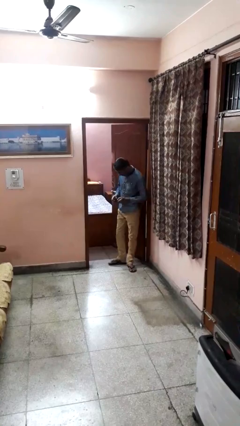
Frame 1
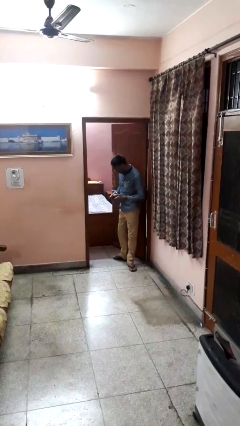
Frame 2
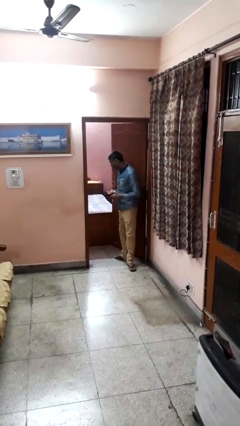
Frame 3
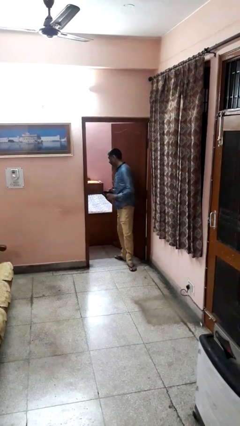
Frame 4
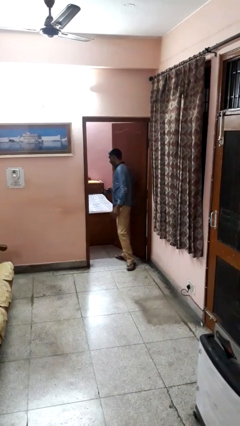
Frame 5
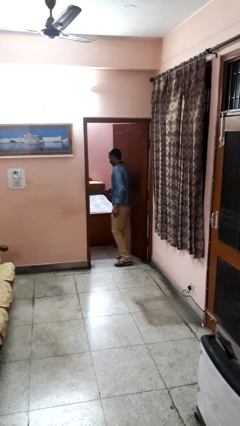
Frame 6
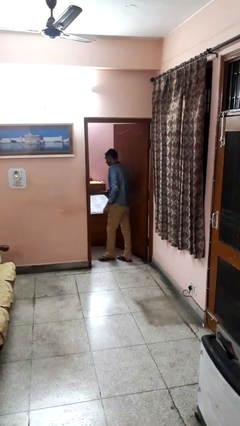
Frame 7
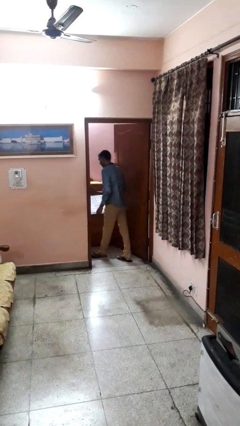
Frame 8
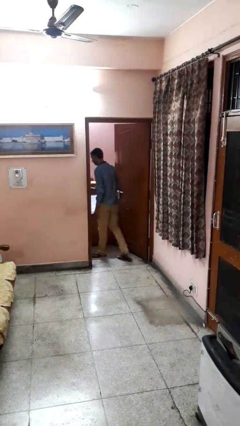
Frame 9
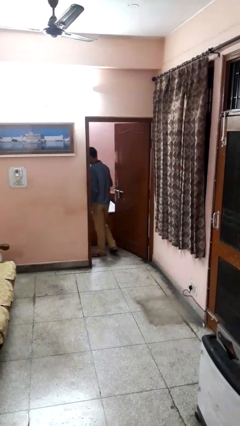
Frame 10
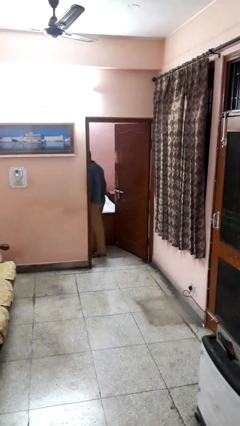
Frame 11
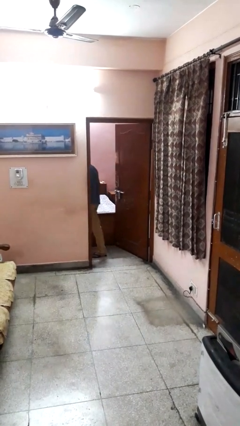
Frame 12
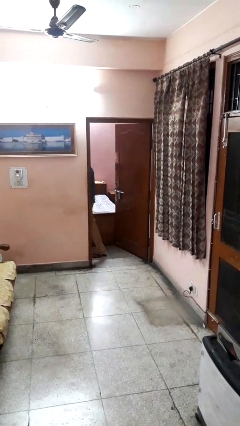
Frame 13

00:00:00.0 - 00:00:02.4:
person exits scene through structure

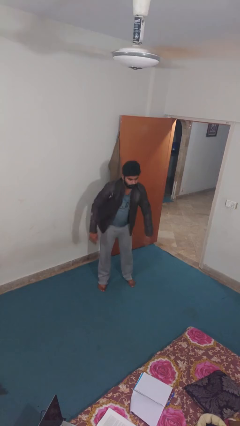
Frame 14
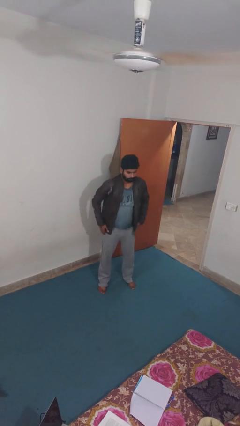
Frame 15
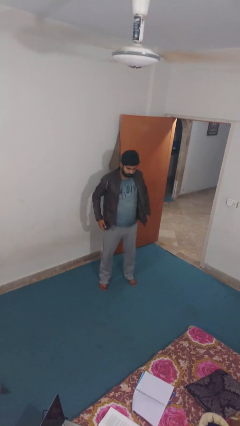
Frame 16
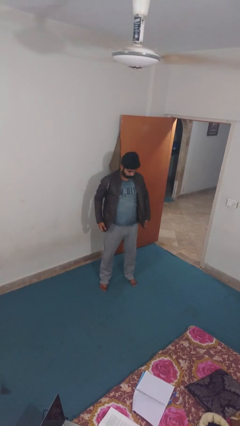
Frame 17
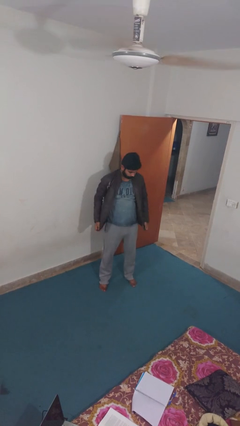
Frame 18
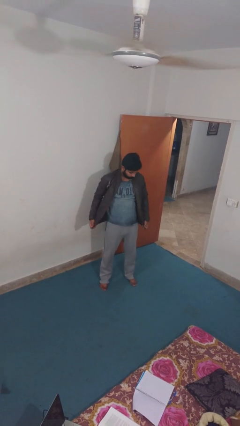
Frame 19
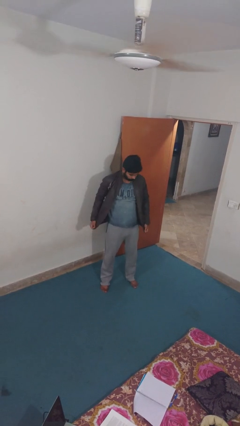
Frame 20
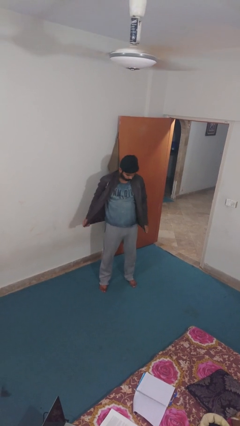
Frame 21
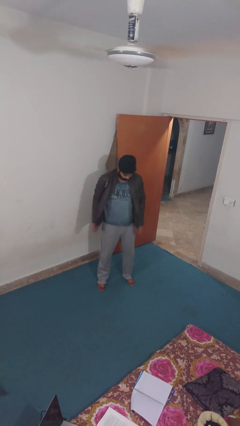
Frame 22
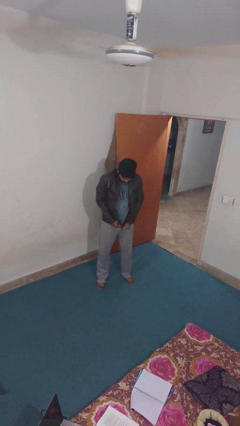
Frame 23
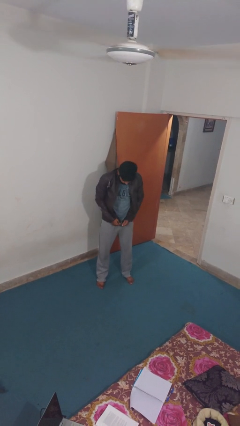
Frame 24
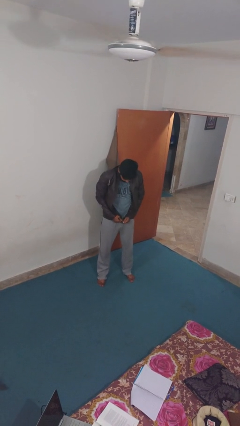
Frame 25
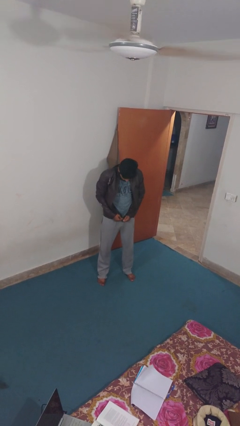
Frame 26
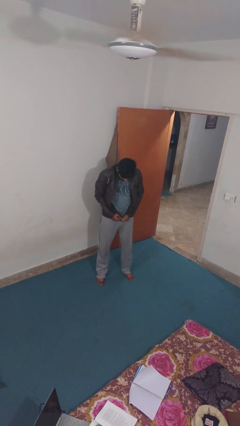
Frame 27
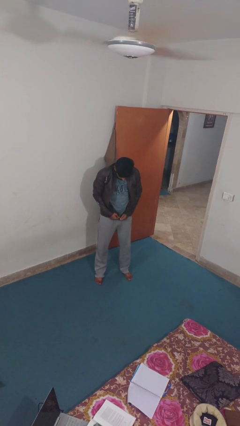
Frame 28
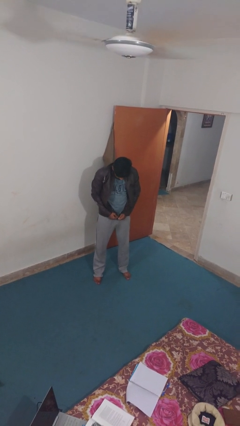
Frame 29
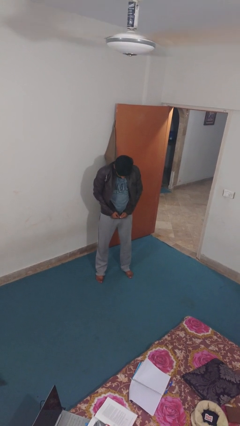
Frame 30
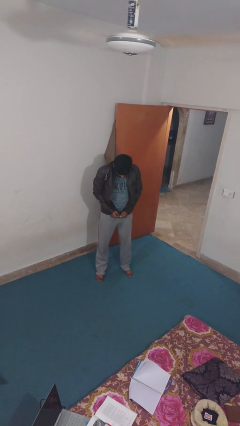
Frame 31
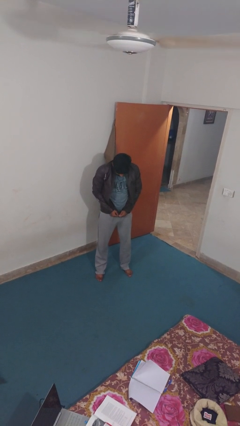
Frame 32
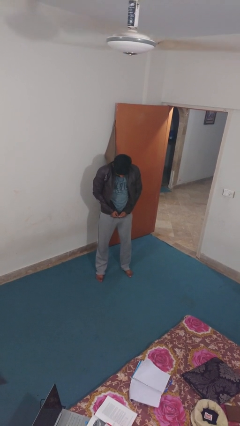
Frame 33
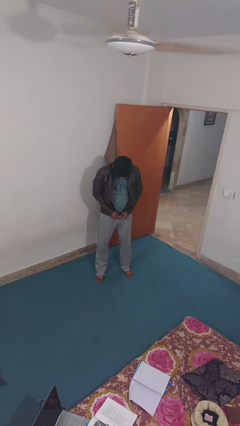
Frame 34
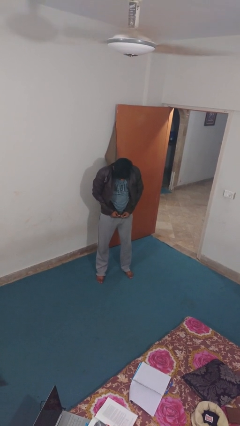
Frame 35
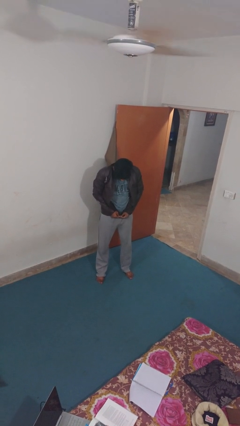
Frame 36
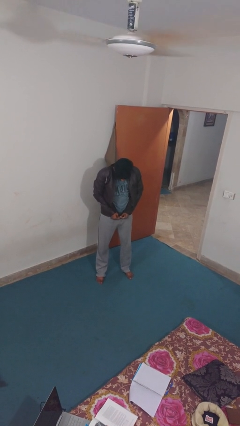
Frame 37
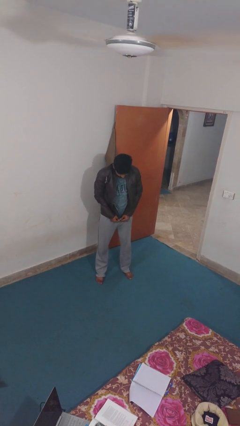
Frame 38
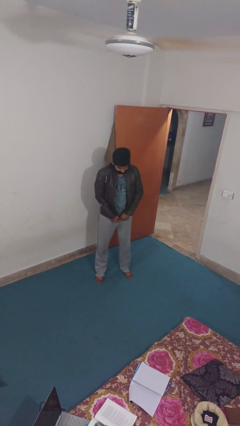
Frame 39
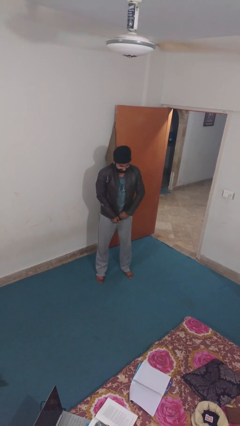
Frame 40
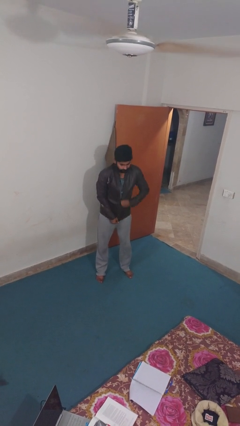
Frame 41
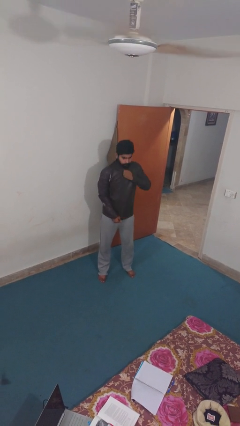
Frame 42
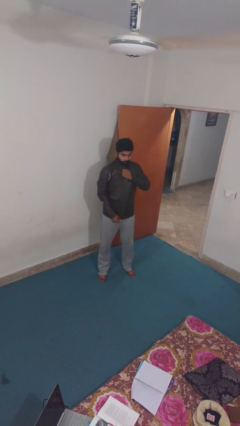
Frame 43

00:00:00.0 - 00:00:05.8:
person zips up jacket

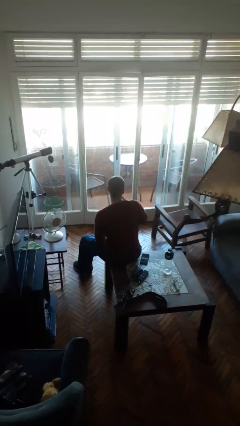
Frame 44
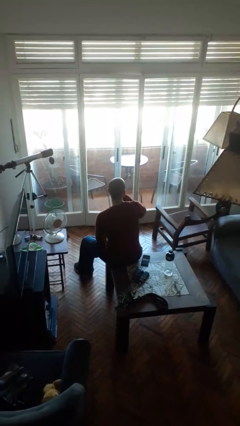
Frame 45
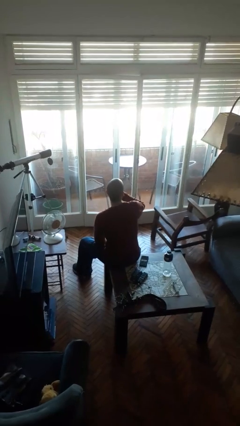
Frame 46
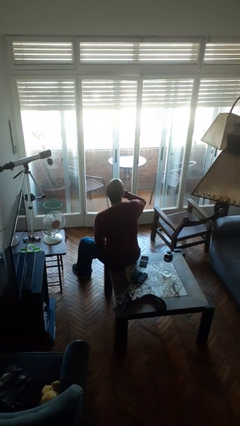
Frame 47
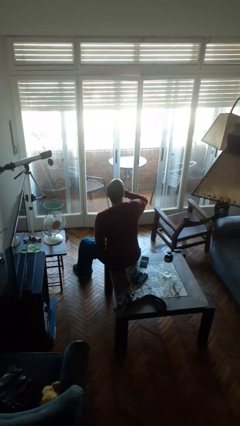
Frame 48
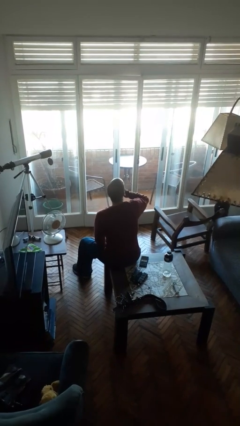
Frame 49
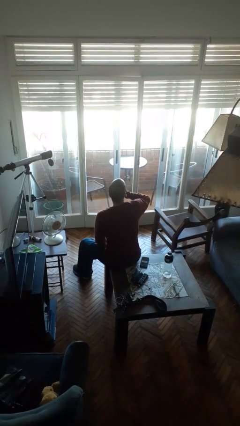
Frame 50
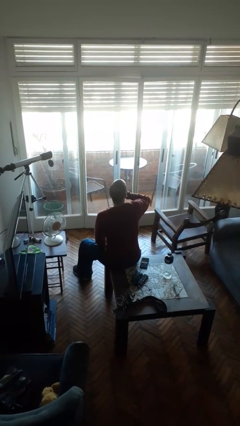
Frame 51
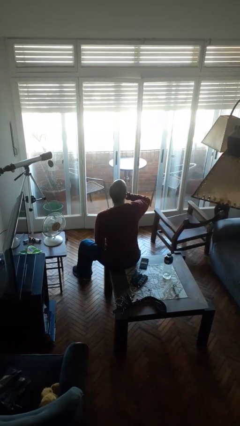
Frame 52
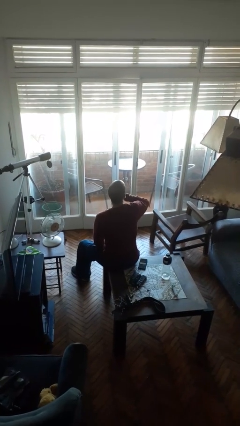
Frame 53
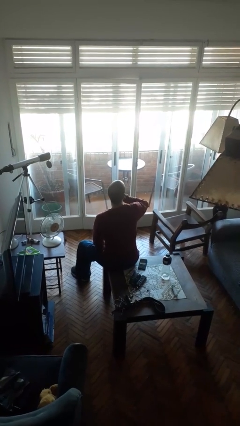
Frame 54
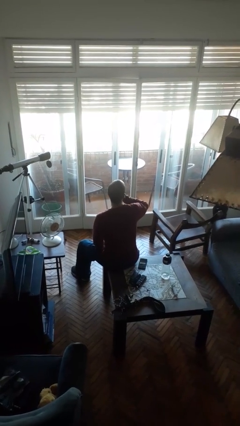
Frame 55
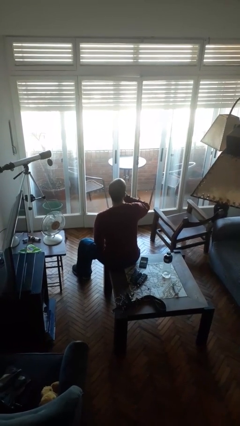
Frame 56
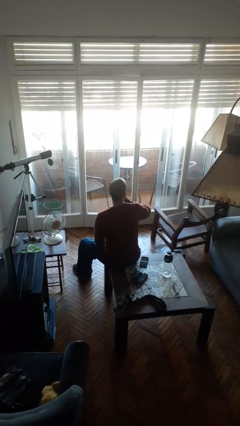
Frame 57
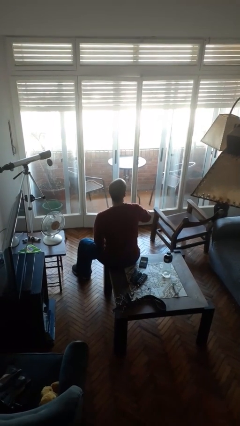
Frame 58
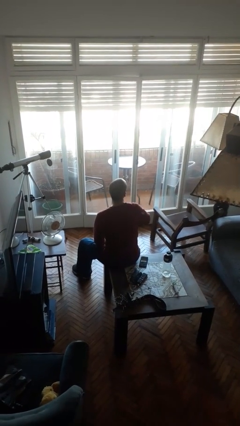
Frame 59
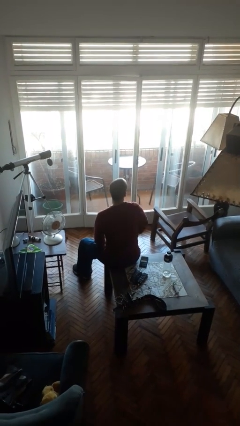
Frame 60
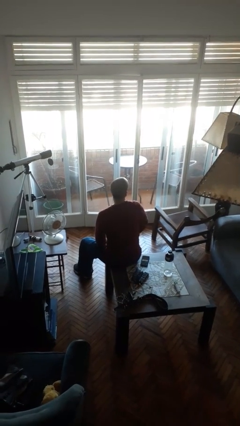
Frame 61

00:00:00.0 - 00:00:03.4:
person yawns

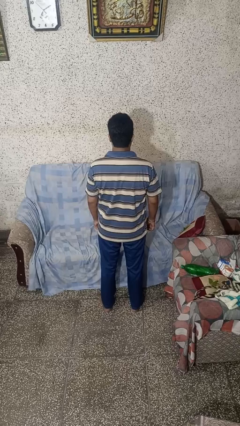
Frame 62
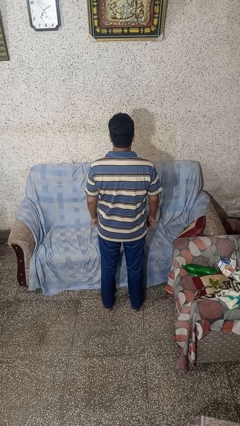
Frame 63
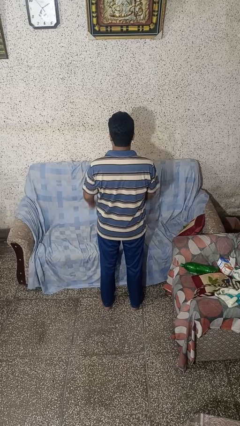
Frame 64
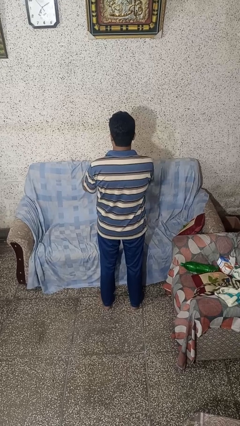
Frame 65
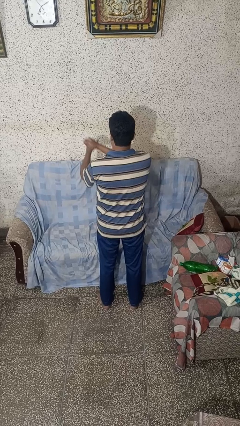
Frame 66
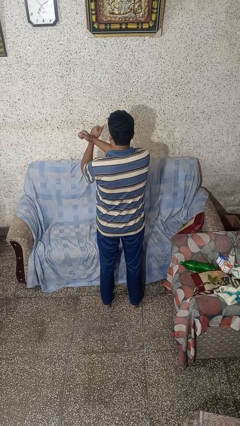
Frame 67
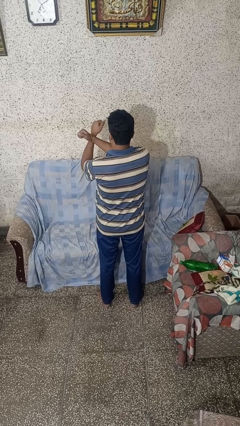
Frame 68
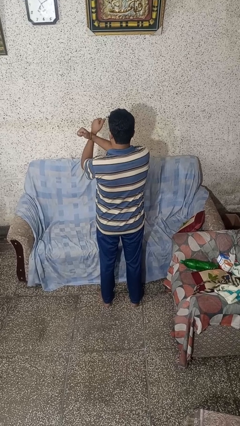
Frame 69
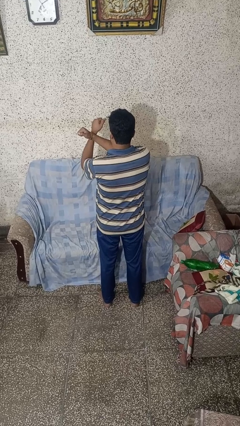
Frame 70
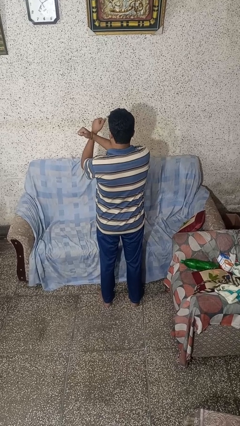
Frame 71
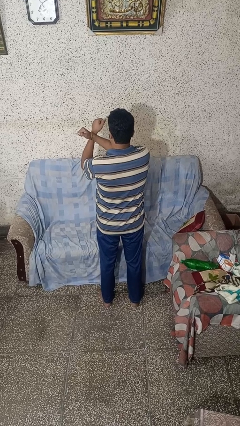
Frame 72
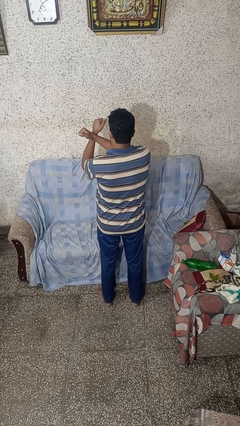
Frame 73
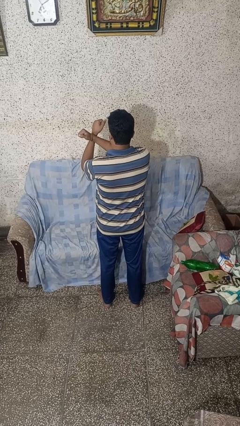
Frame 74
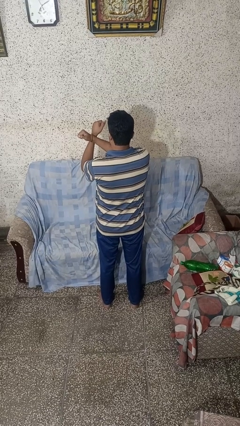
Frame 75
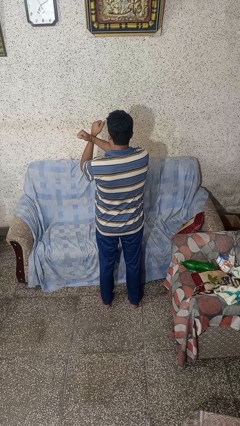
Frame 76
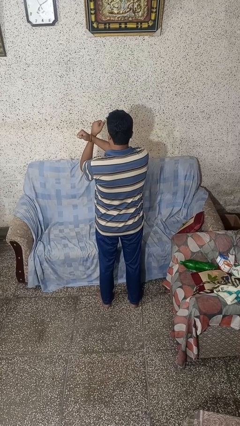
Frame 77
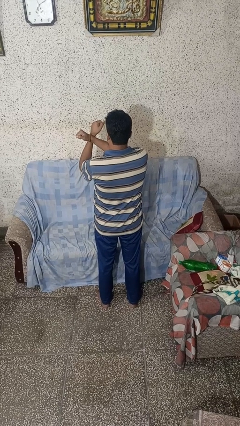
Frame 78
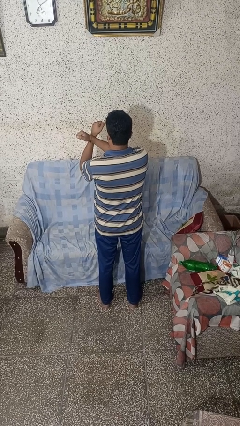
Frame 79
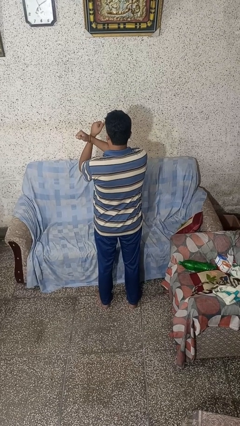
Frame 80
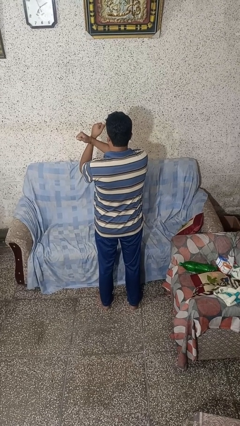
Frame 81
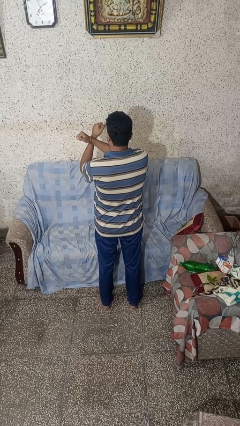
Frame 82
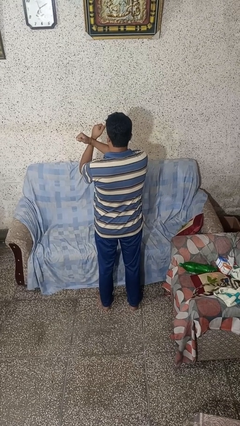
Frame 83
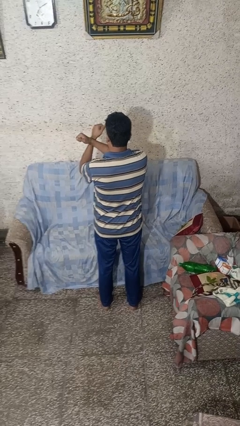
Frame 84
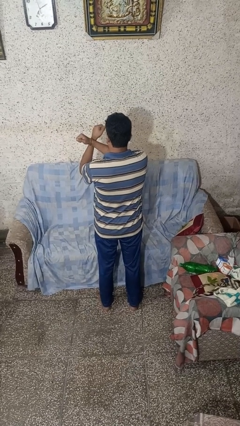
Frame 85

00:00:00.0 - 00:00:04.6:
person gestures arms x

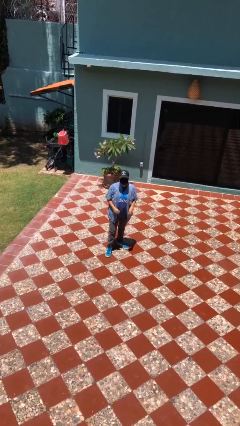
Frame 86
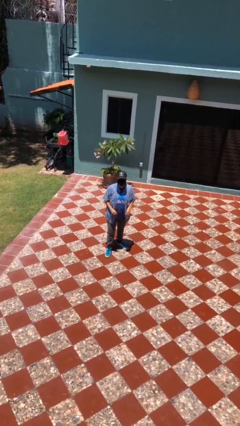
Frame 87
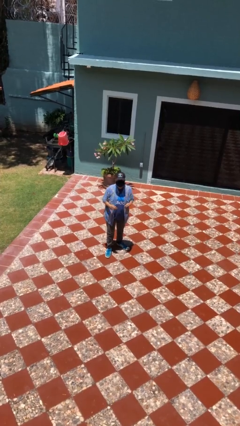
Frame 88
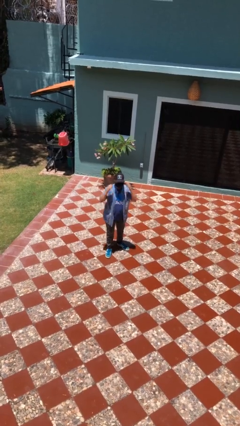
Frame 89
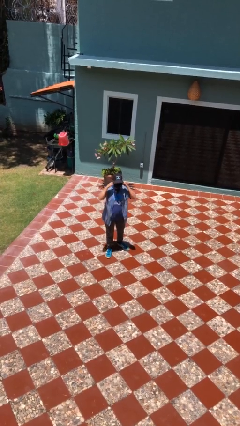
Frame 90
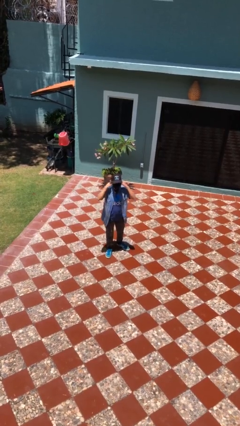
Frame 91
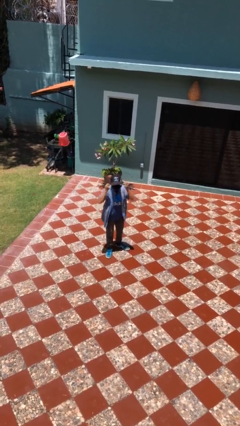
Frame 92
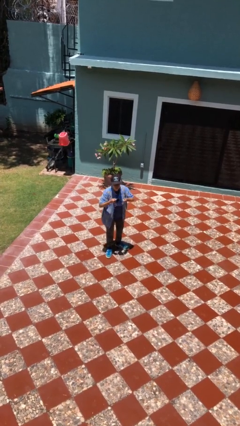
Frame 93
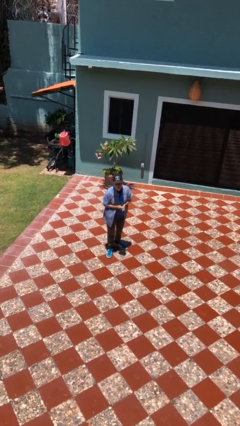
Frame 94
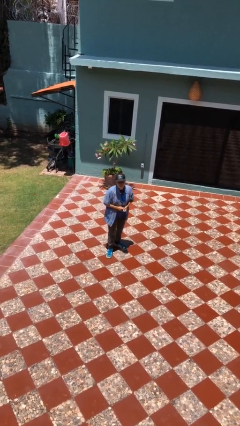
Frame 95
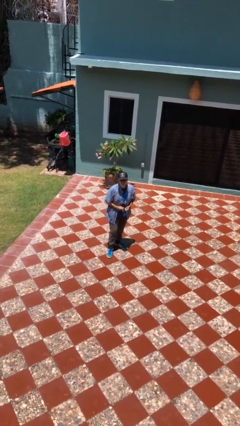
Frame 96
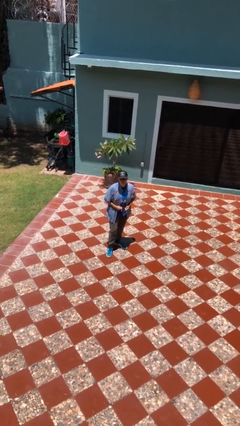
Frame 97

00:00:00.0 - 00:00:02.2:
person takes off facemask
